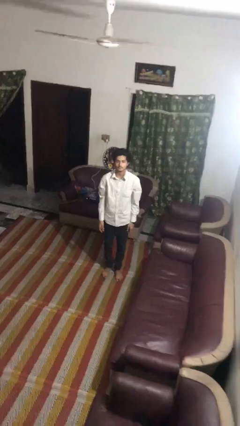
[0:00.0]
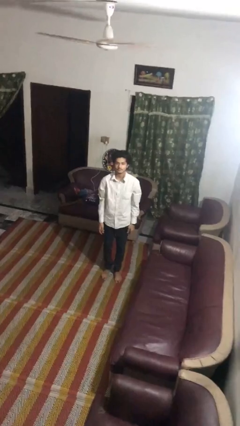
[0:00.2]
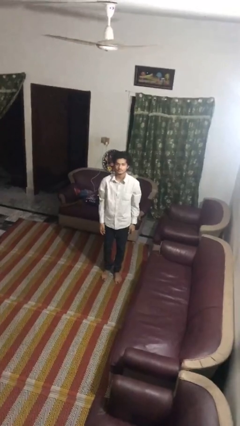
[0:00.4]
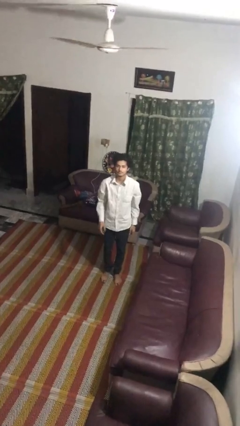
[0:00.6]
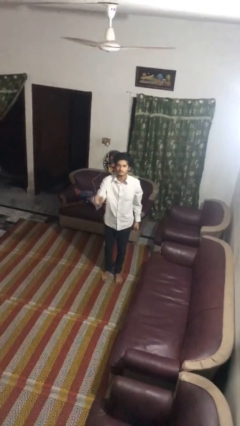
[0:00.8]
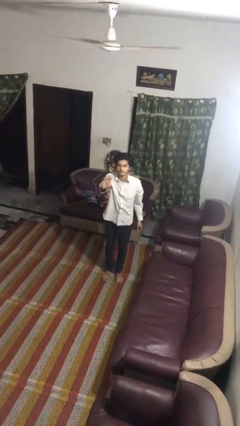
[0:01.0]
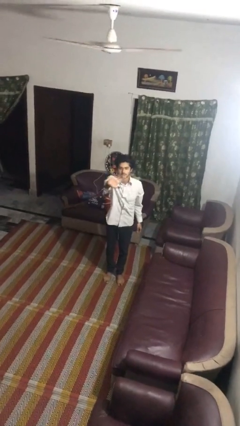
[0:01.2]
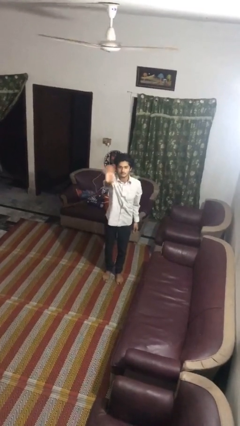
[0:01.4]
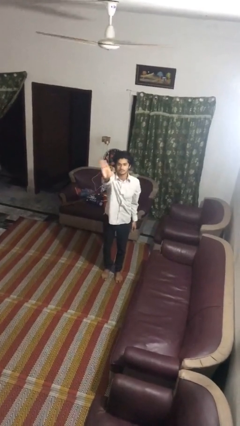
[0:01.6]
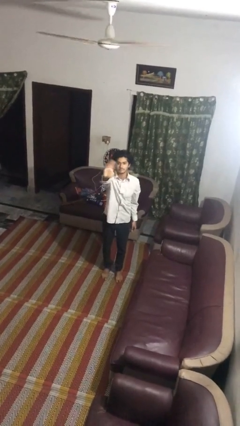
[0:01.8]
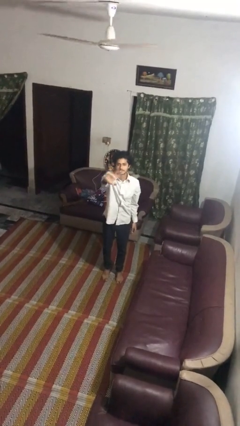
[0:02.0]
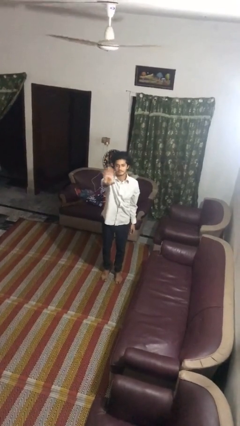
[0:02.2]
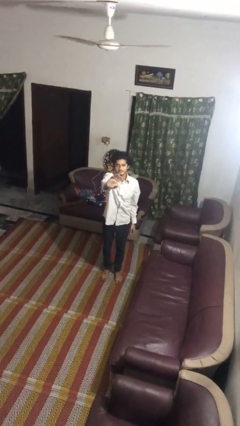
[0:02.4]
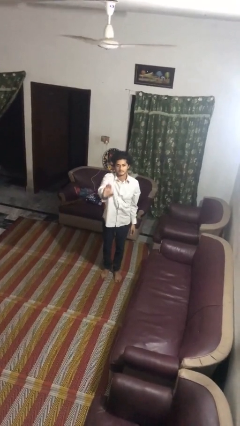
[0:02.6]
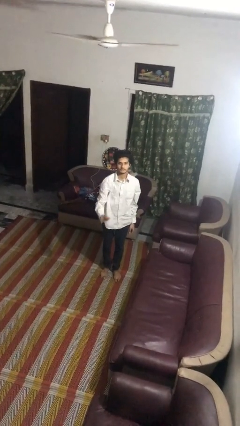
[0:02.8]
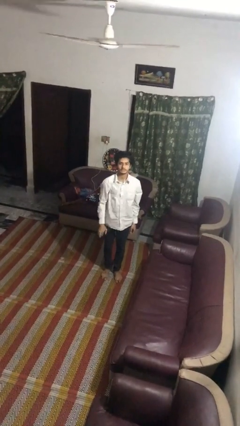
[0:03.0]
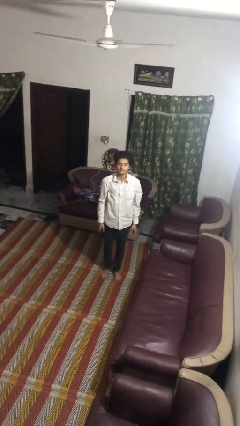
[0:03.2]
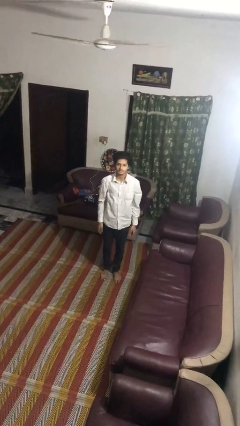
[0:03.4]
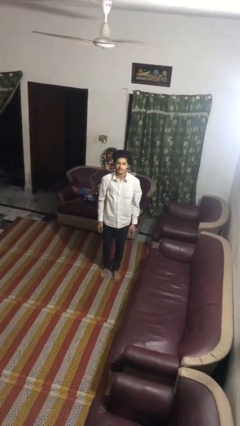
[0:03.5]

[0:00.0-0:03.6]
person waves at person

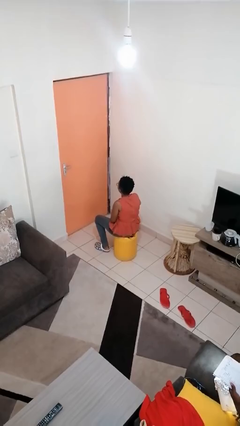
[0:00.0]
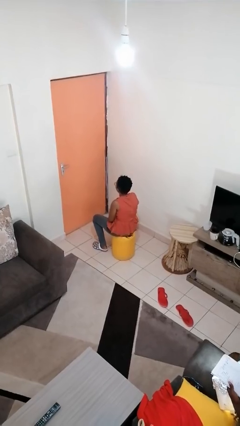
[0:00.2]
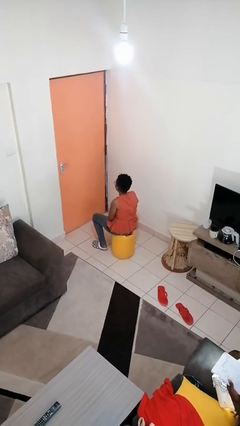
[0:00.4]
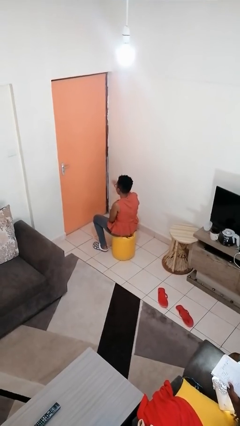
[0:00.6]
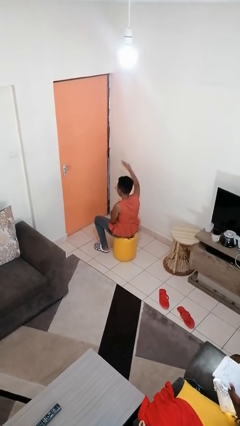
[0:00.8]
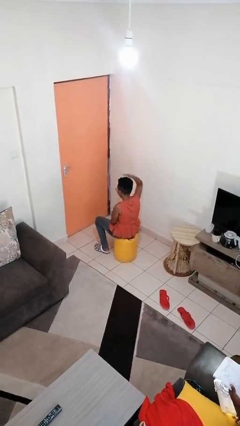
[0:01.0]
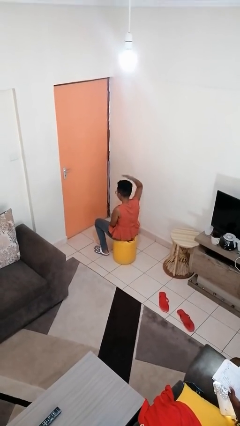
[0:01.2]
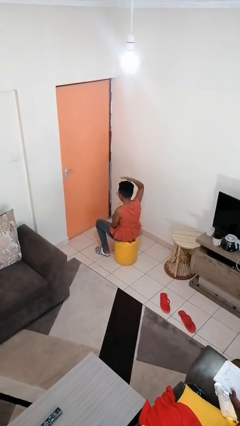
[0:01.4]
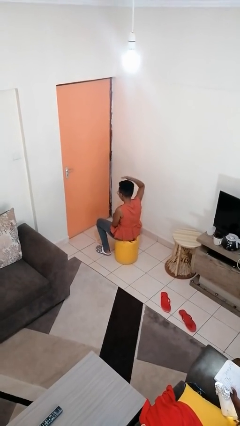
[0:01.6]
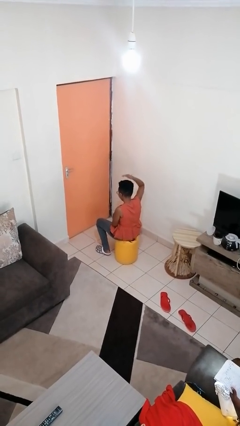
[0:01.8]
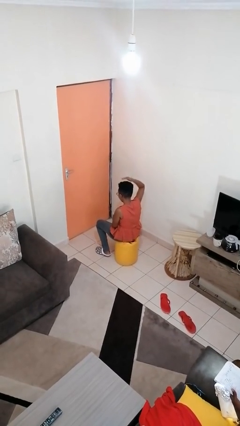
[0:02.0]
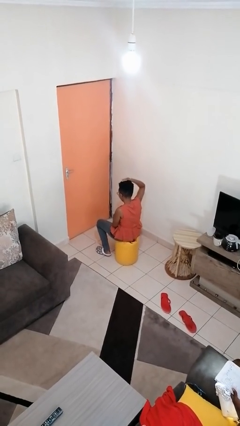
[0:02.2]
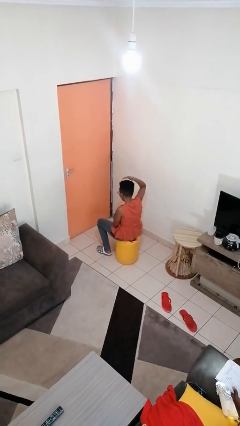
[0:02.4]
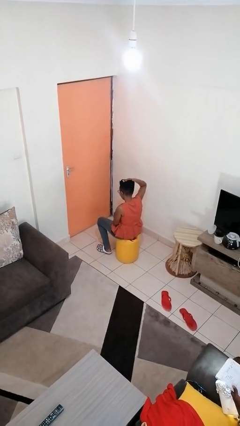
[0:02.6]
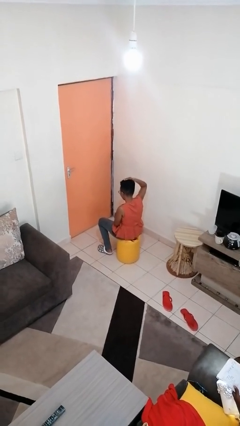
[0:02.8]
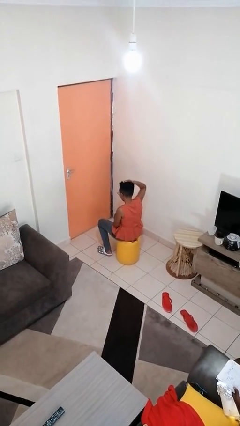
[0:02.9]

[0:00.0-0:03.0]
person pats head

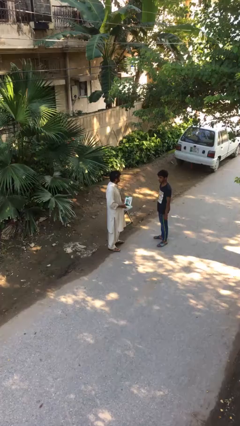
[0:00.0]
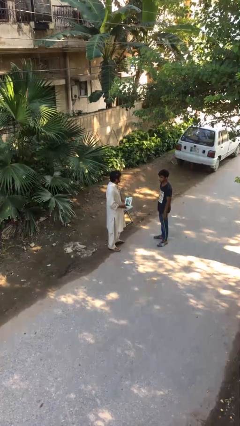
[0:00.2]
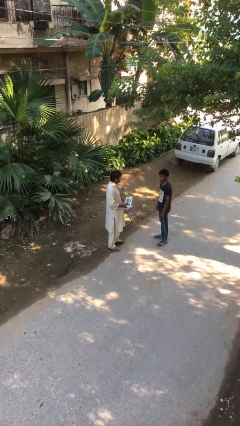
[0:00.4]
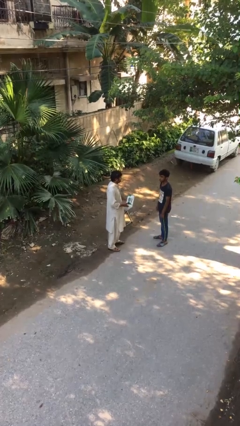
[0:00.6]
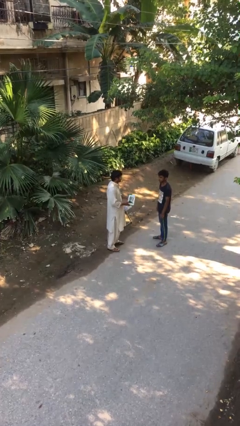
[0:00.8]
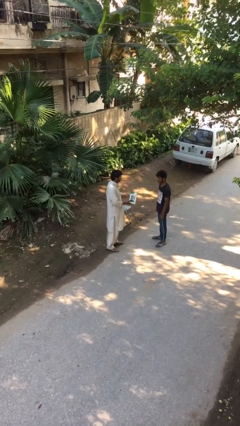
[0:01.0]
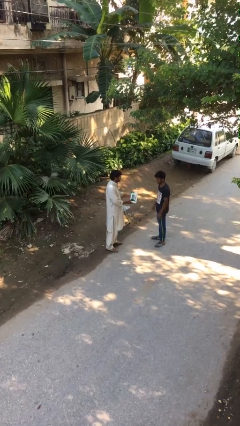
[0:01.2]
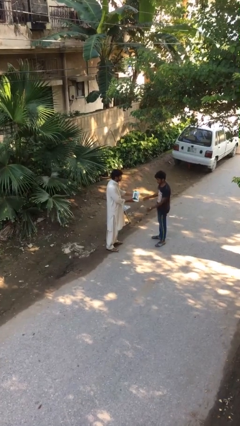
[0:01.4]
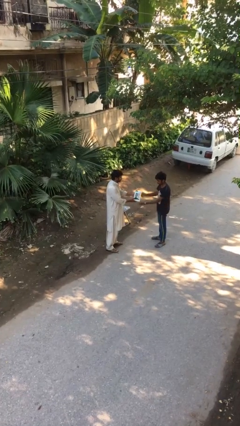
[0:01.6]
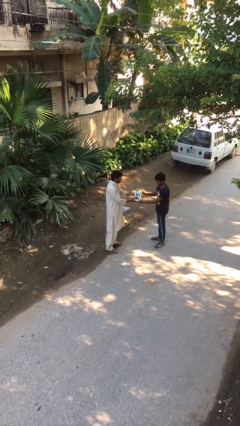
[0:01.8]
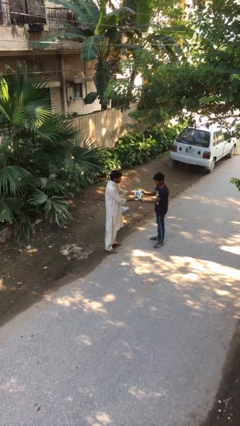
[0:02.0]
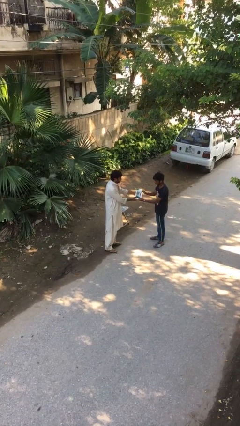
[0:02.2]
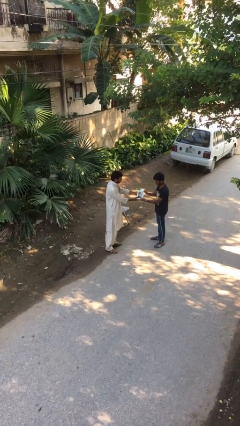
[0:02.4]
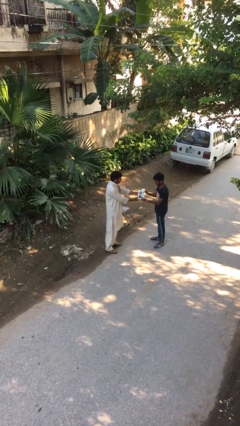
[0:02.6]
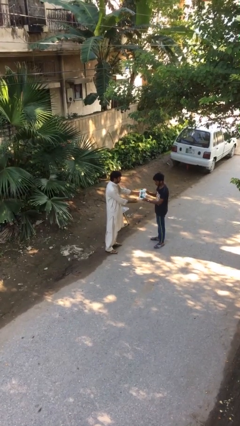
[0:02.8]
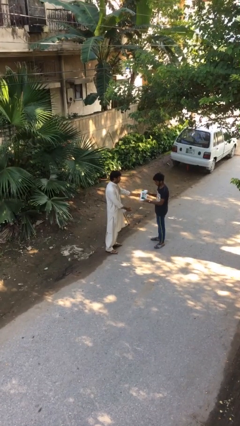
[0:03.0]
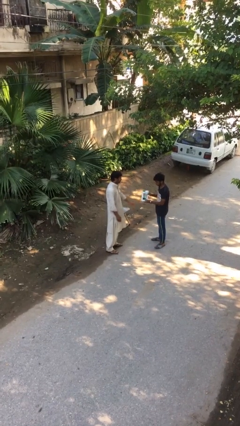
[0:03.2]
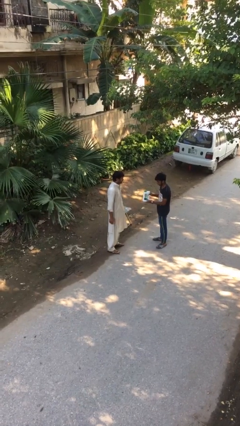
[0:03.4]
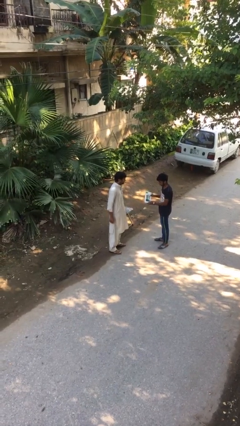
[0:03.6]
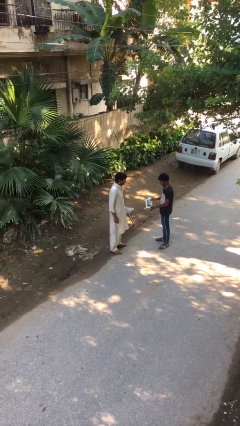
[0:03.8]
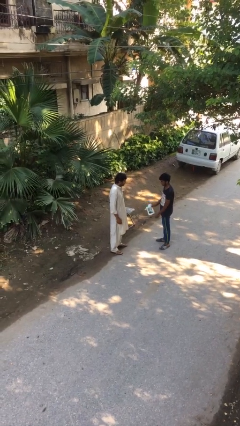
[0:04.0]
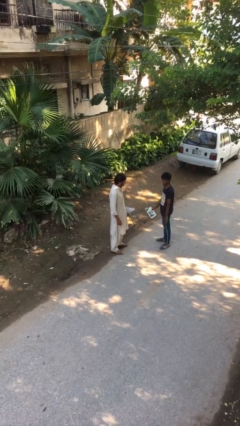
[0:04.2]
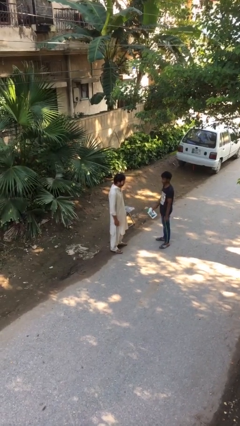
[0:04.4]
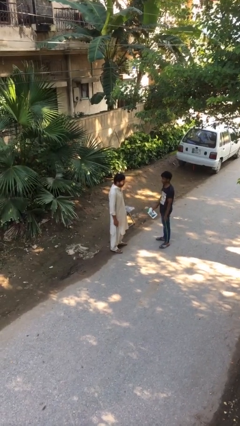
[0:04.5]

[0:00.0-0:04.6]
person transfers object to person

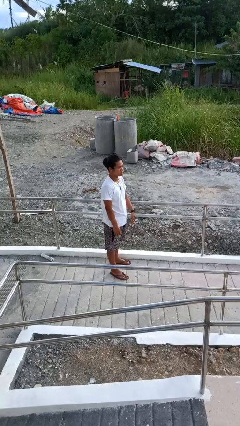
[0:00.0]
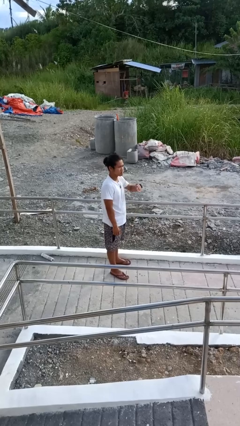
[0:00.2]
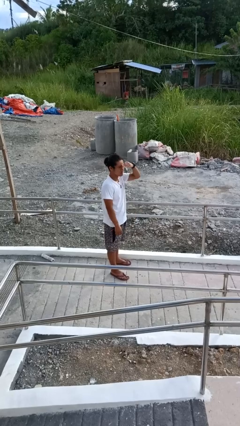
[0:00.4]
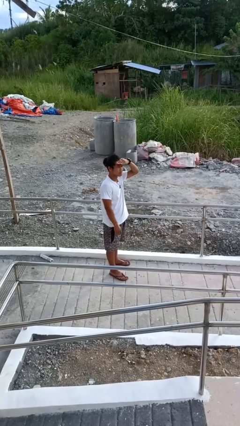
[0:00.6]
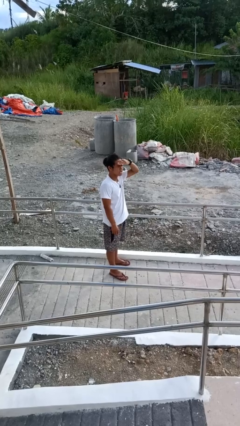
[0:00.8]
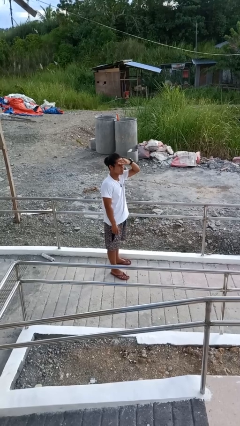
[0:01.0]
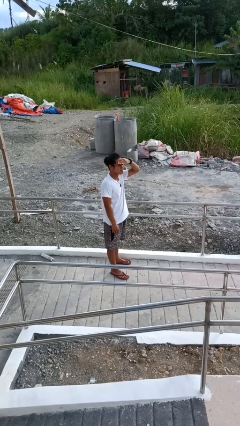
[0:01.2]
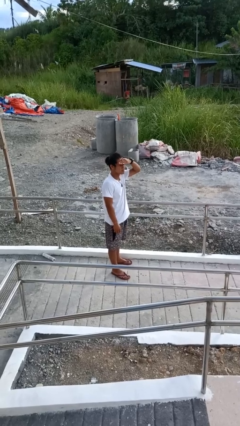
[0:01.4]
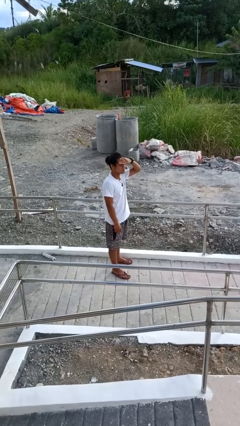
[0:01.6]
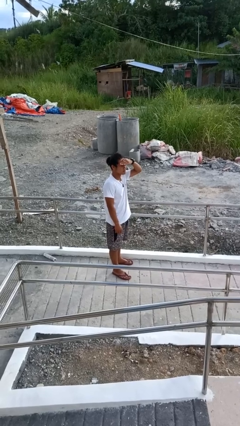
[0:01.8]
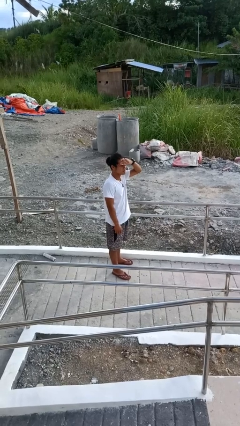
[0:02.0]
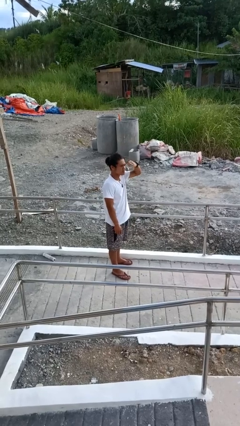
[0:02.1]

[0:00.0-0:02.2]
person shades eyes

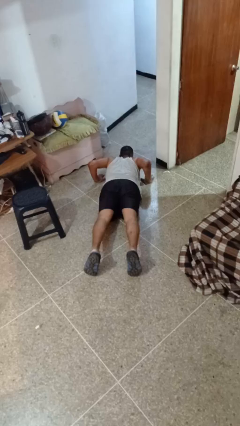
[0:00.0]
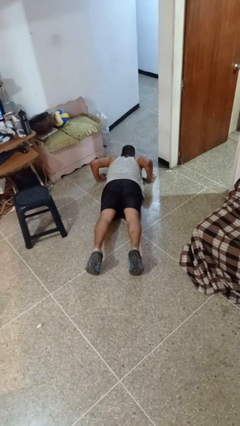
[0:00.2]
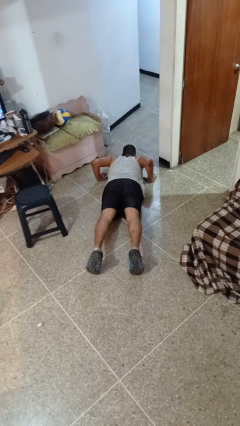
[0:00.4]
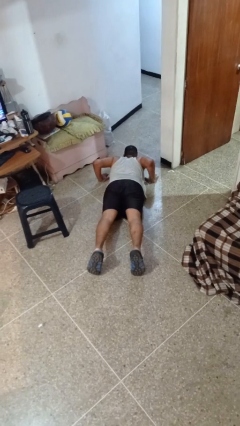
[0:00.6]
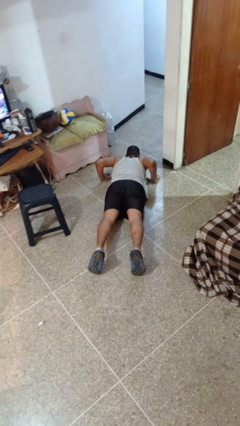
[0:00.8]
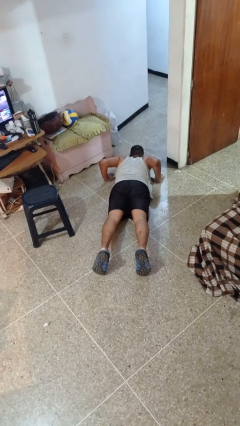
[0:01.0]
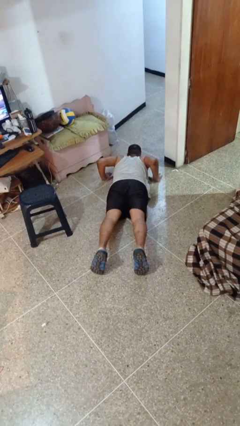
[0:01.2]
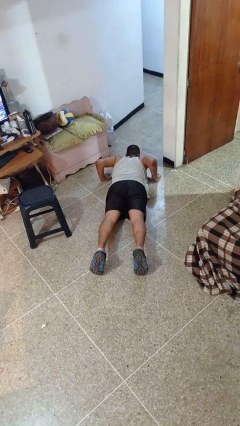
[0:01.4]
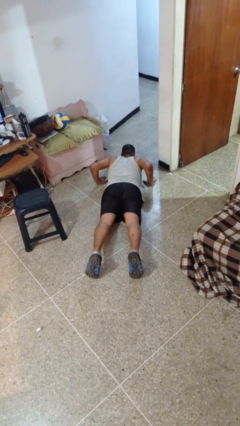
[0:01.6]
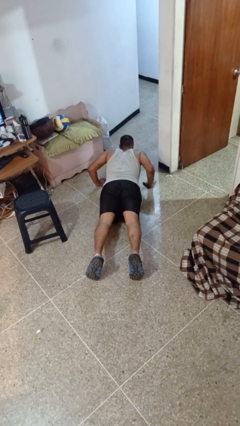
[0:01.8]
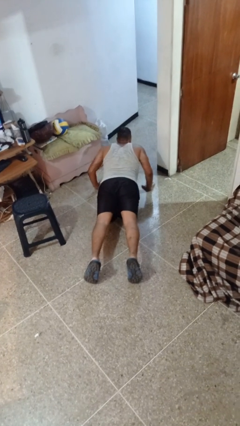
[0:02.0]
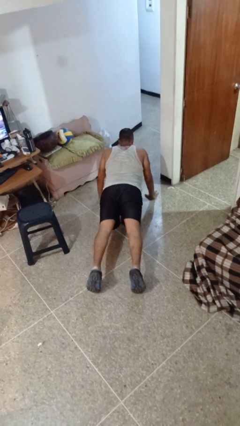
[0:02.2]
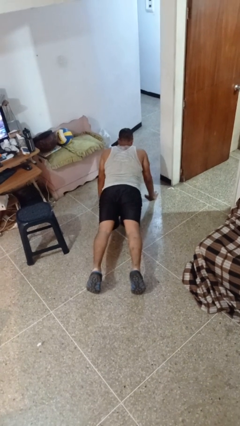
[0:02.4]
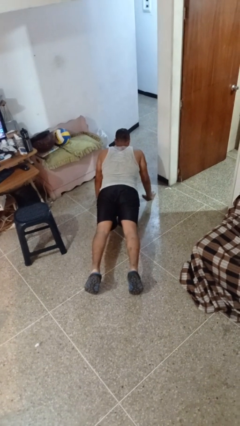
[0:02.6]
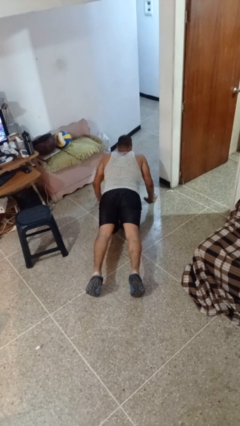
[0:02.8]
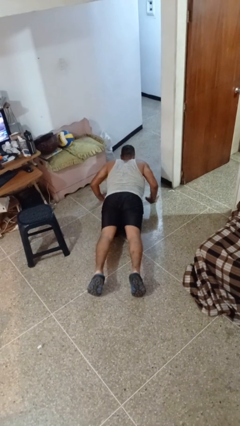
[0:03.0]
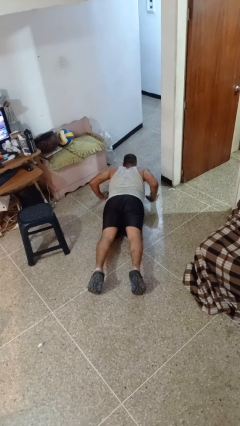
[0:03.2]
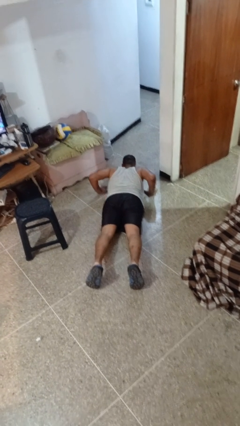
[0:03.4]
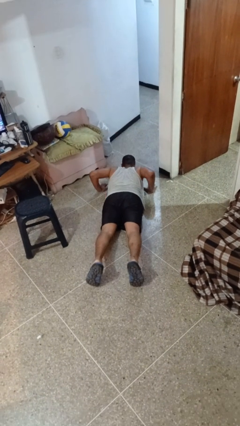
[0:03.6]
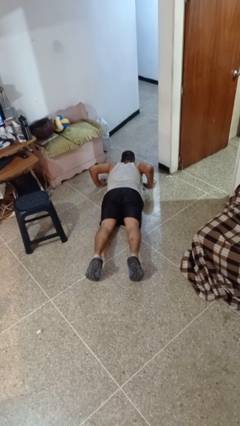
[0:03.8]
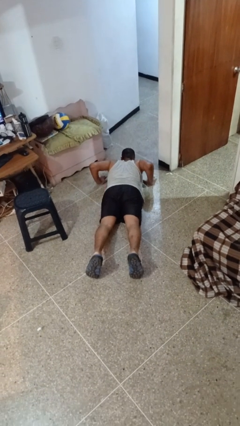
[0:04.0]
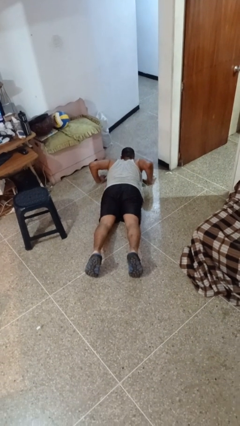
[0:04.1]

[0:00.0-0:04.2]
person exercises with pushup
